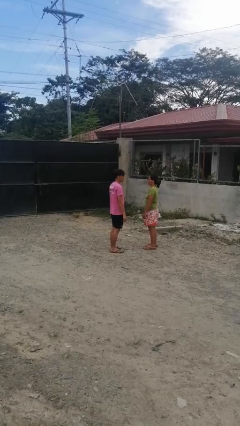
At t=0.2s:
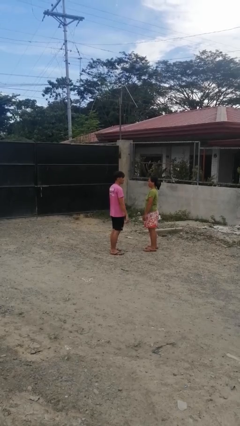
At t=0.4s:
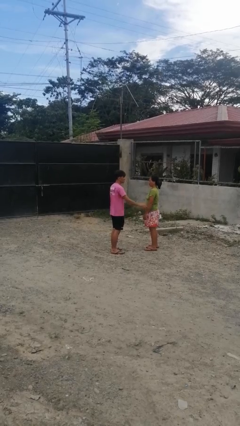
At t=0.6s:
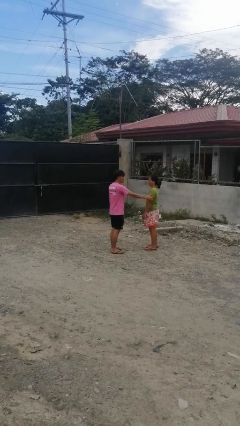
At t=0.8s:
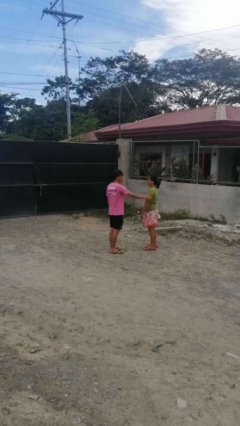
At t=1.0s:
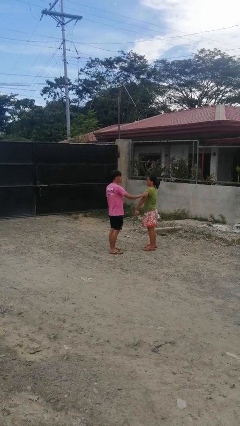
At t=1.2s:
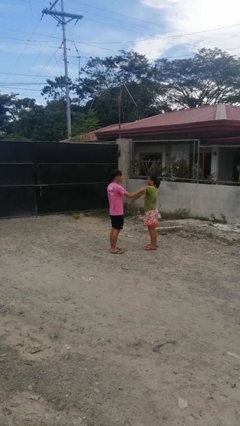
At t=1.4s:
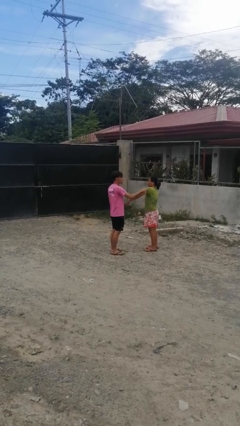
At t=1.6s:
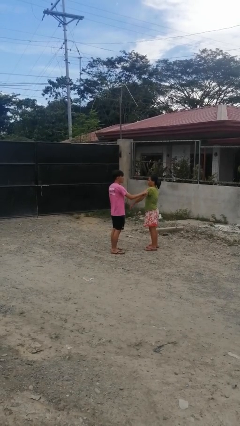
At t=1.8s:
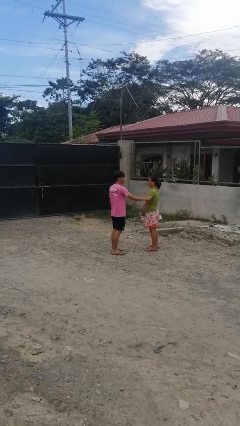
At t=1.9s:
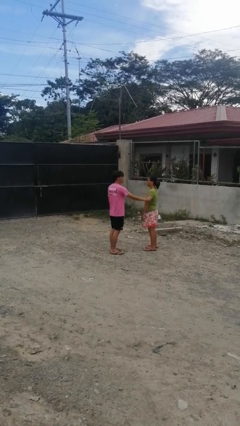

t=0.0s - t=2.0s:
person grabs person by bicep

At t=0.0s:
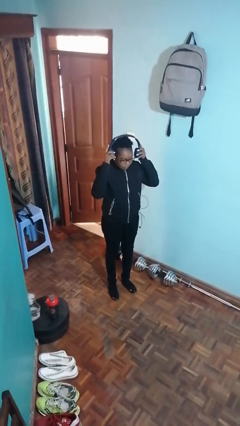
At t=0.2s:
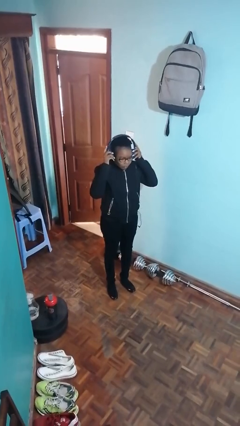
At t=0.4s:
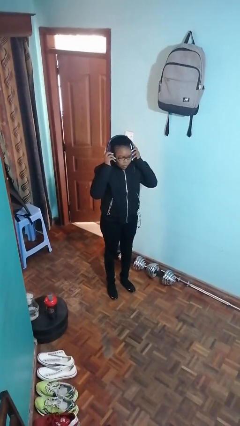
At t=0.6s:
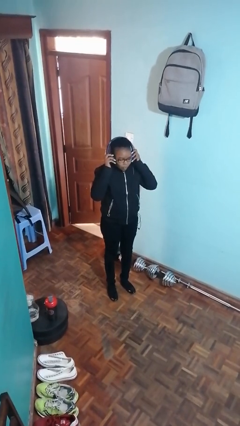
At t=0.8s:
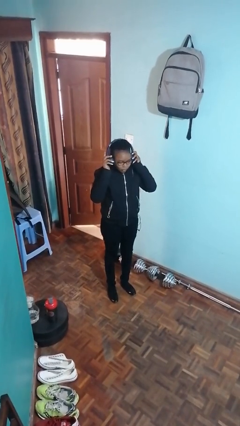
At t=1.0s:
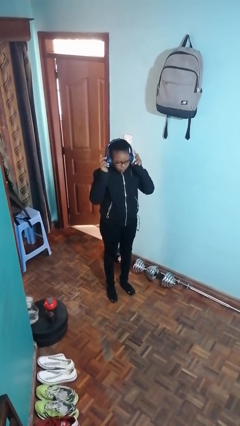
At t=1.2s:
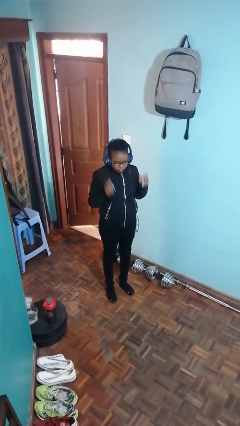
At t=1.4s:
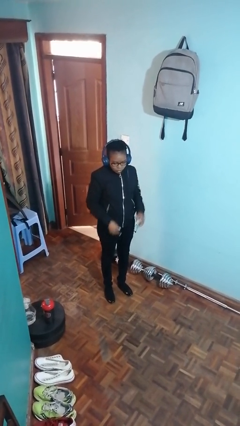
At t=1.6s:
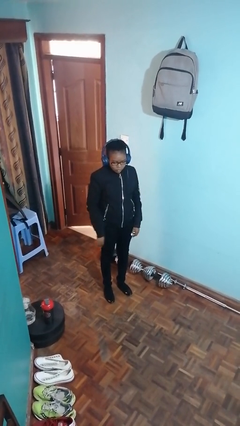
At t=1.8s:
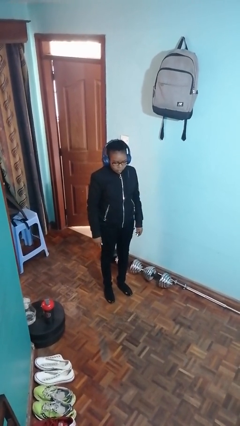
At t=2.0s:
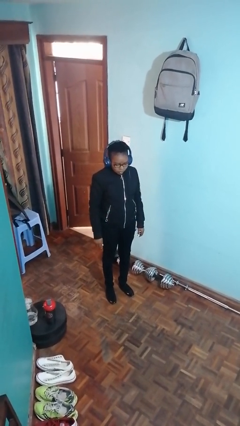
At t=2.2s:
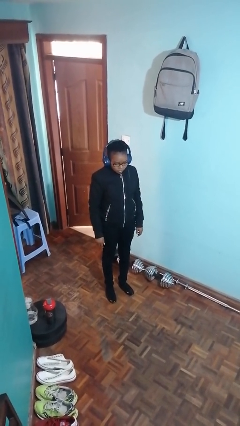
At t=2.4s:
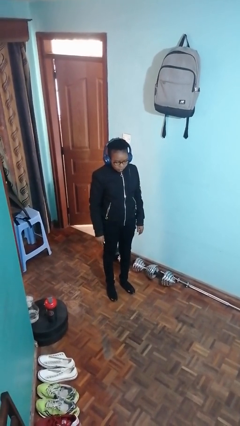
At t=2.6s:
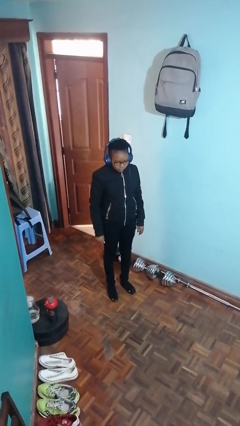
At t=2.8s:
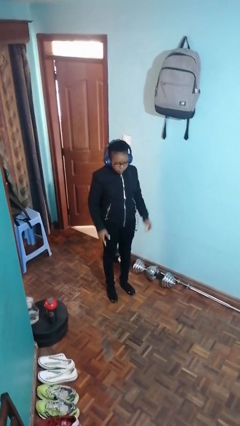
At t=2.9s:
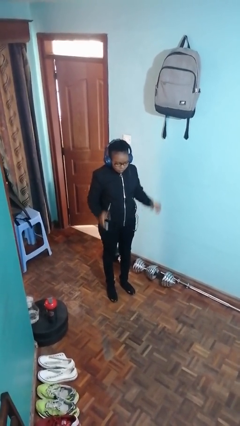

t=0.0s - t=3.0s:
person puts on headphones

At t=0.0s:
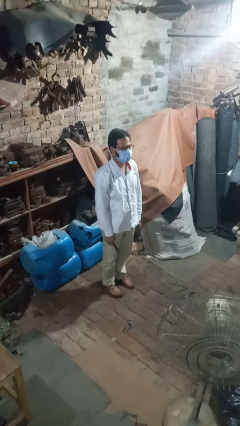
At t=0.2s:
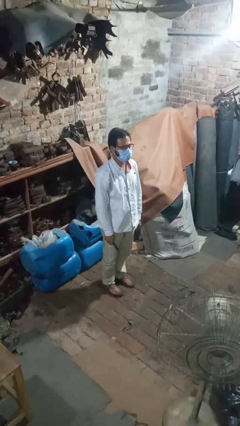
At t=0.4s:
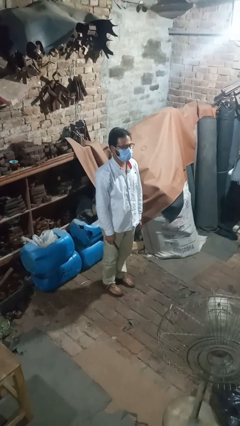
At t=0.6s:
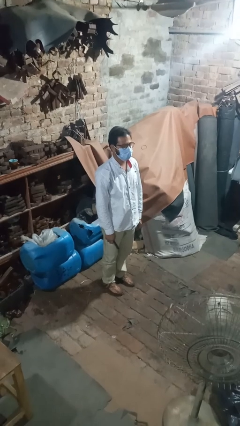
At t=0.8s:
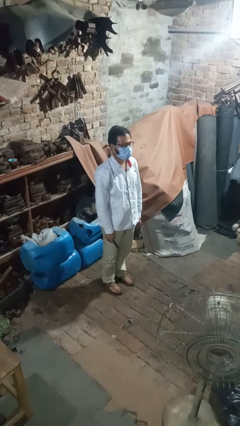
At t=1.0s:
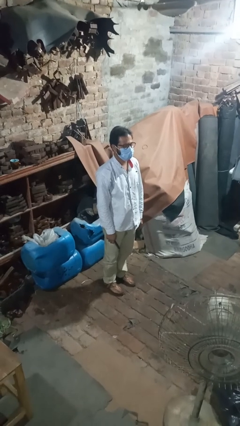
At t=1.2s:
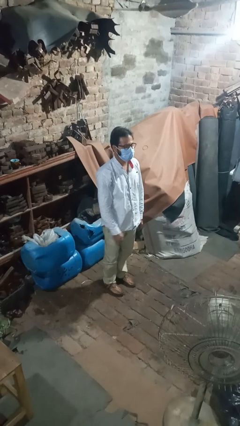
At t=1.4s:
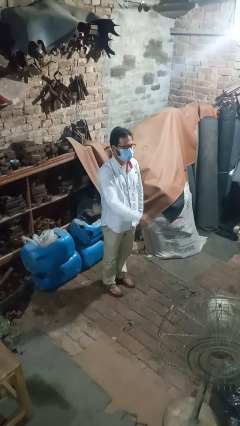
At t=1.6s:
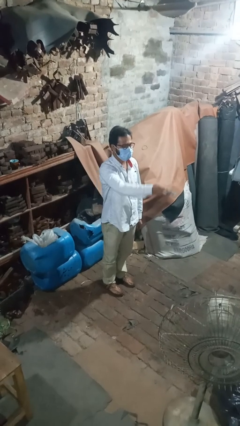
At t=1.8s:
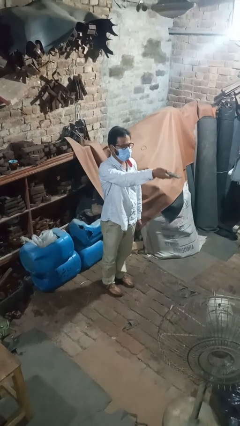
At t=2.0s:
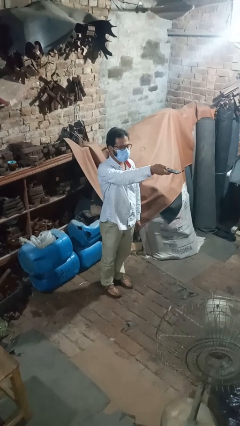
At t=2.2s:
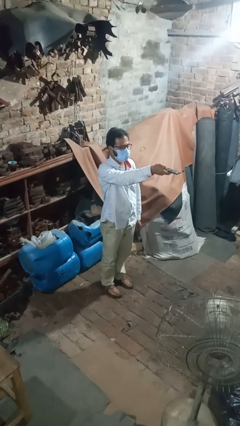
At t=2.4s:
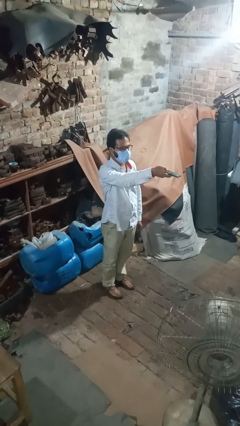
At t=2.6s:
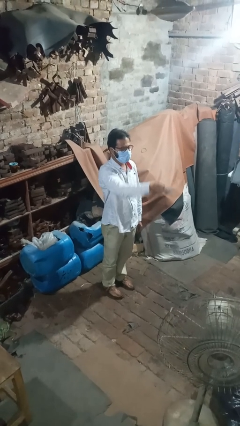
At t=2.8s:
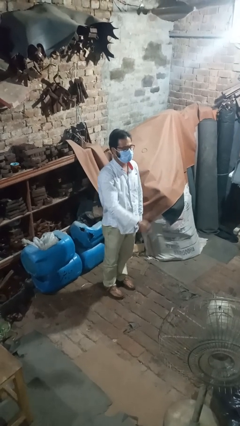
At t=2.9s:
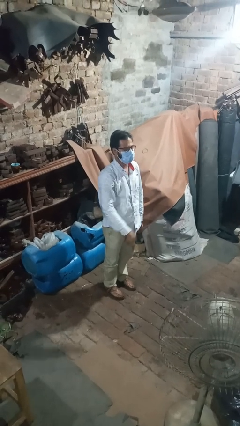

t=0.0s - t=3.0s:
person uses television remote

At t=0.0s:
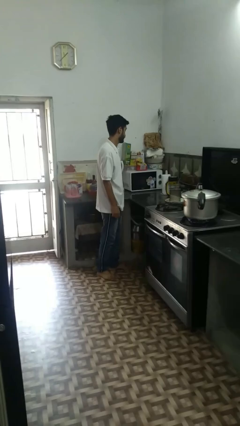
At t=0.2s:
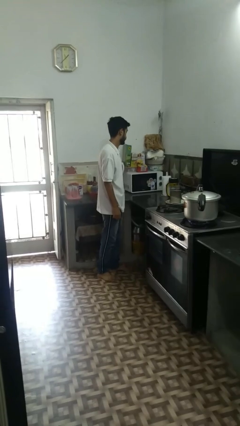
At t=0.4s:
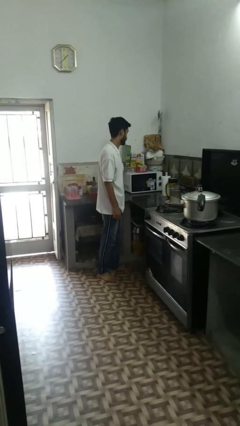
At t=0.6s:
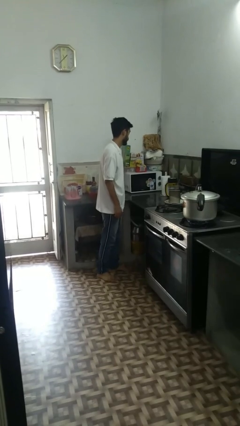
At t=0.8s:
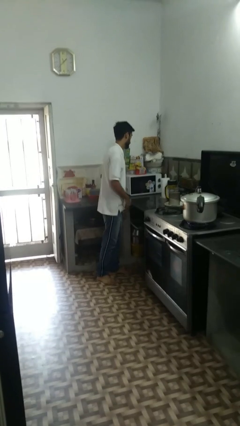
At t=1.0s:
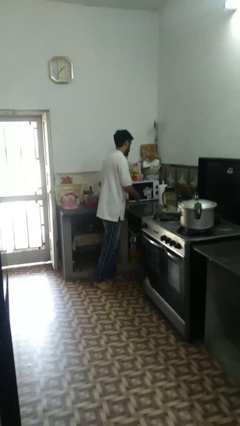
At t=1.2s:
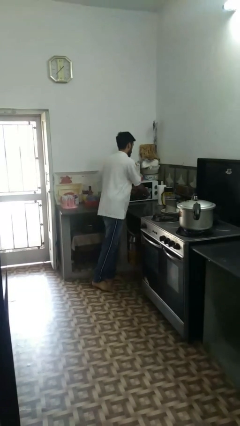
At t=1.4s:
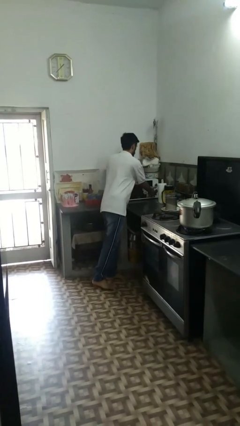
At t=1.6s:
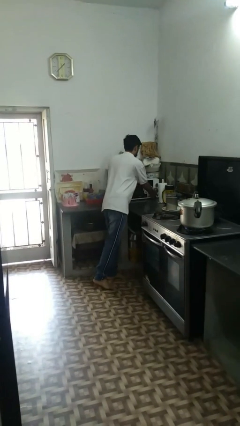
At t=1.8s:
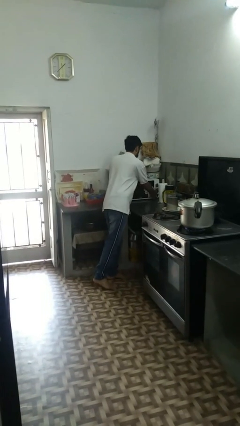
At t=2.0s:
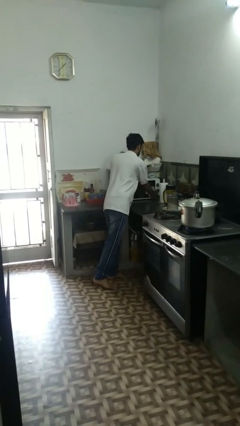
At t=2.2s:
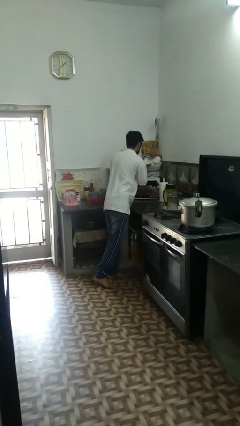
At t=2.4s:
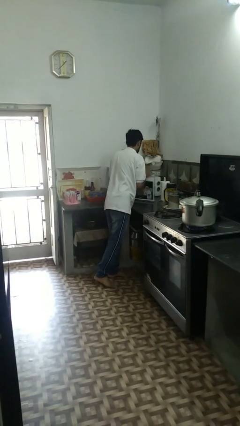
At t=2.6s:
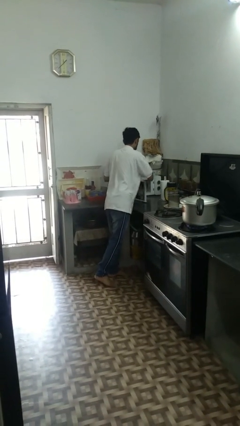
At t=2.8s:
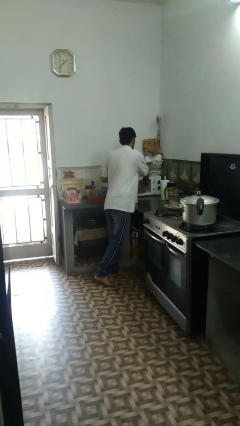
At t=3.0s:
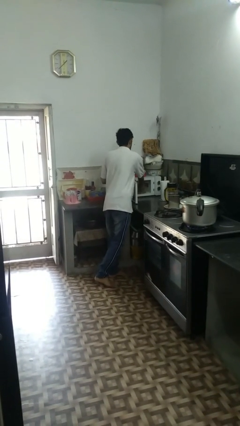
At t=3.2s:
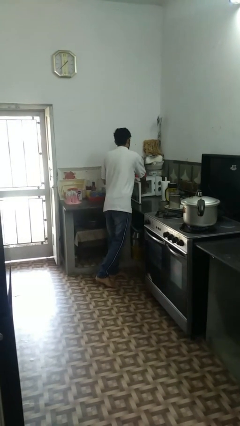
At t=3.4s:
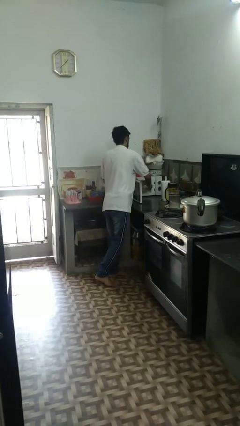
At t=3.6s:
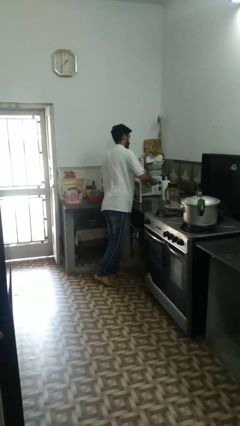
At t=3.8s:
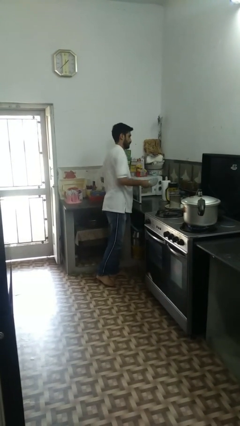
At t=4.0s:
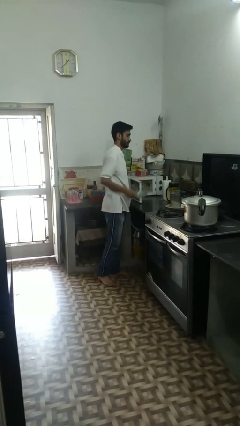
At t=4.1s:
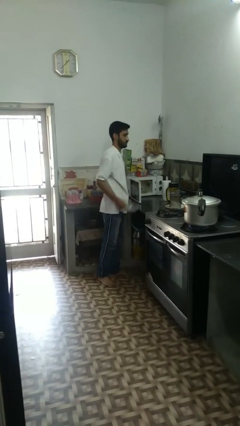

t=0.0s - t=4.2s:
person takes object from microwave

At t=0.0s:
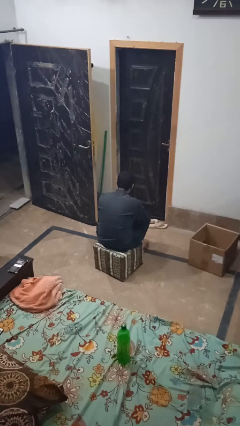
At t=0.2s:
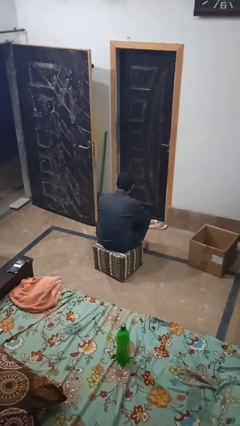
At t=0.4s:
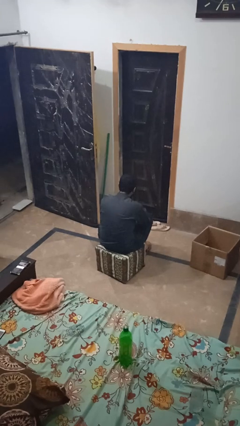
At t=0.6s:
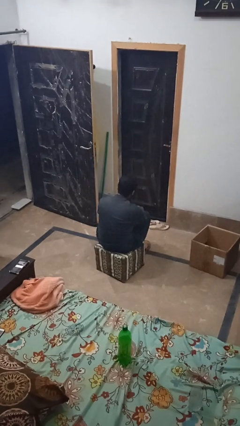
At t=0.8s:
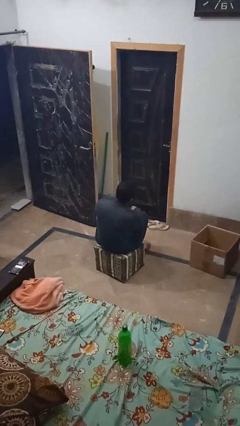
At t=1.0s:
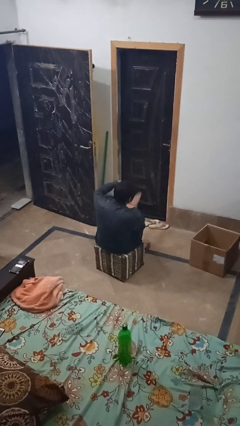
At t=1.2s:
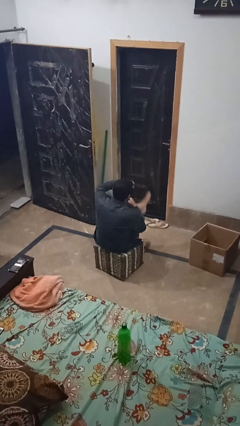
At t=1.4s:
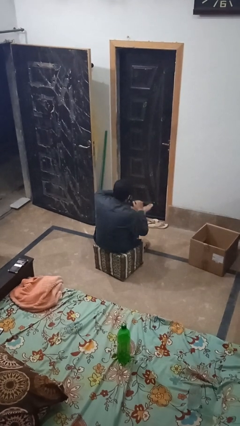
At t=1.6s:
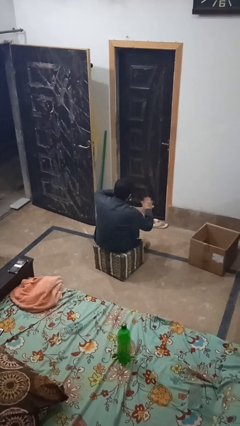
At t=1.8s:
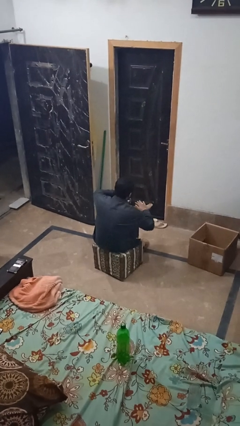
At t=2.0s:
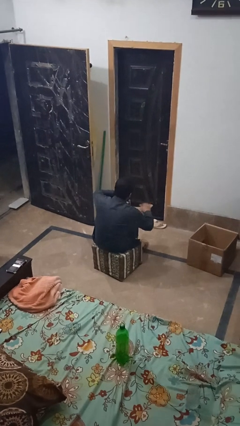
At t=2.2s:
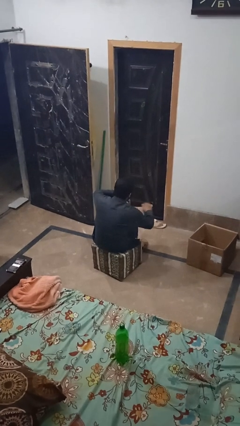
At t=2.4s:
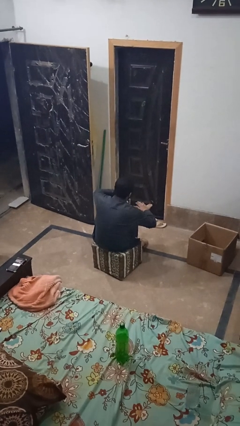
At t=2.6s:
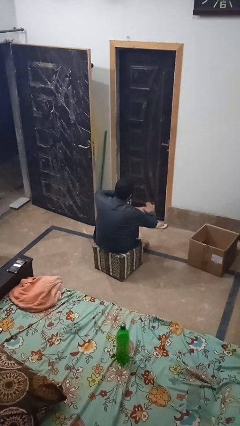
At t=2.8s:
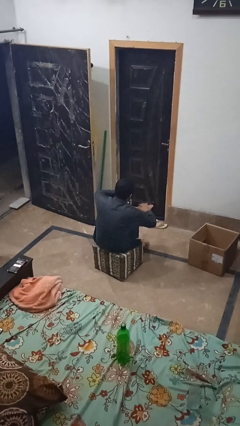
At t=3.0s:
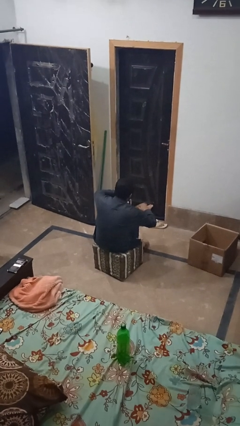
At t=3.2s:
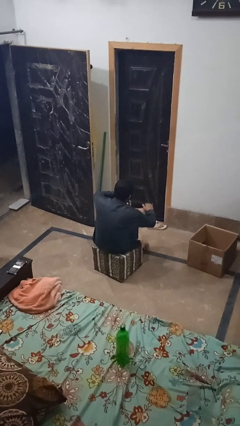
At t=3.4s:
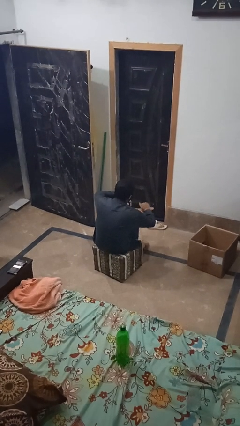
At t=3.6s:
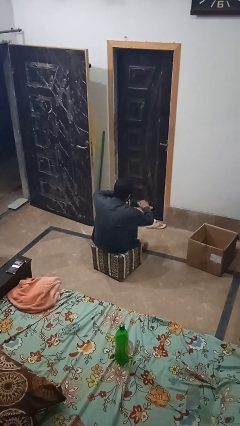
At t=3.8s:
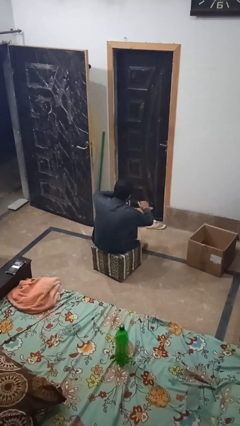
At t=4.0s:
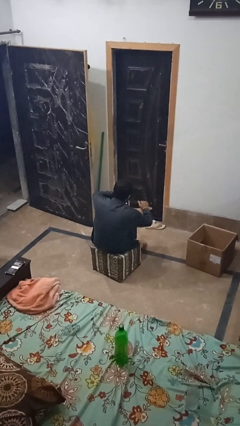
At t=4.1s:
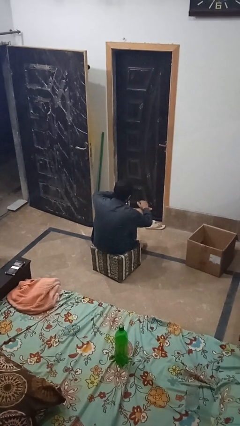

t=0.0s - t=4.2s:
person rubs foot

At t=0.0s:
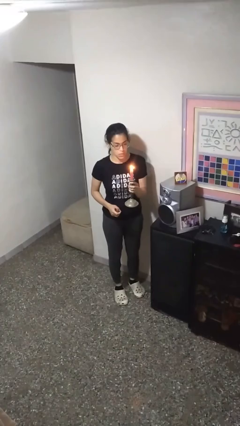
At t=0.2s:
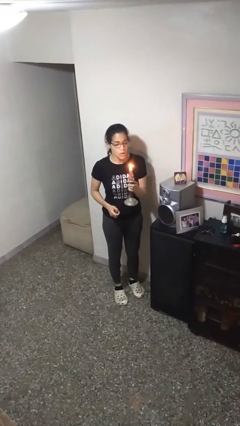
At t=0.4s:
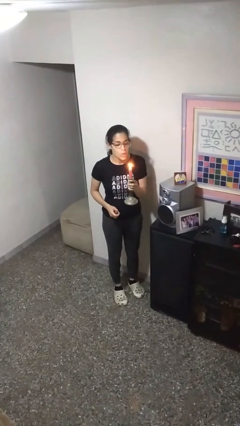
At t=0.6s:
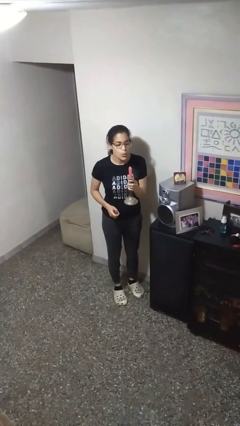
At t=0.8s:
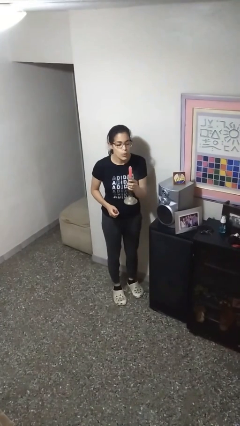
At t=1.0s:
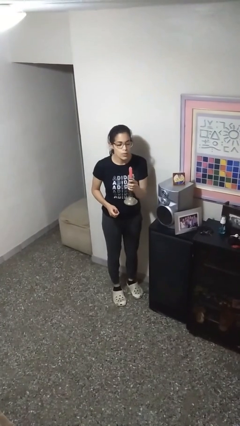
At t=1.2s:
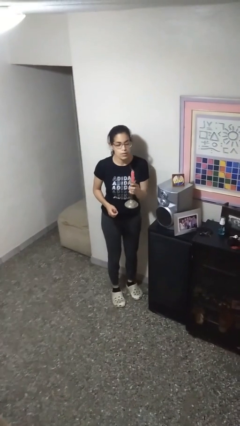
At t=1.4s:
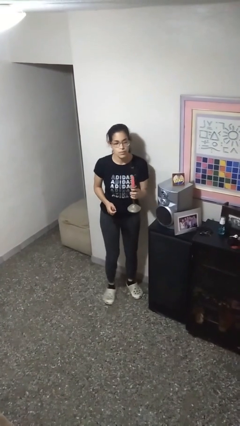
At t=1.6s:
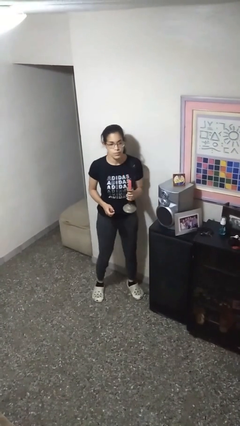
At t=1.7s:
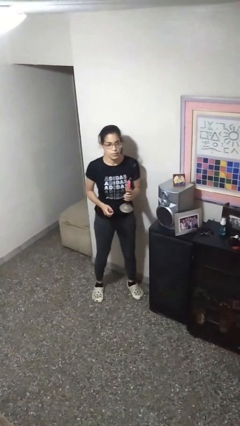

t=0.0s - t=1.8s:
person extinguishes candle
